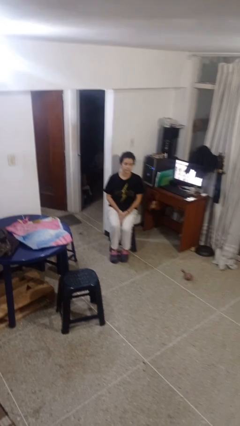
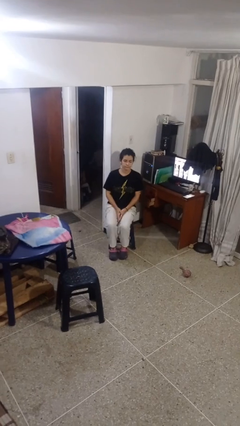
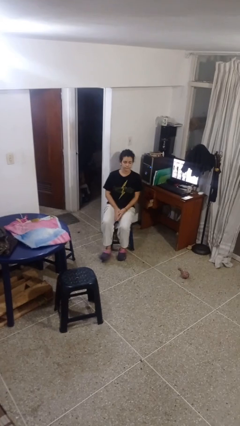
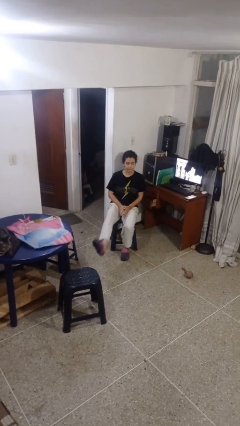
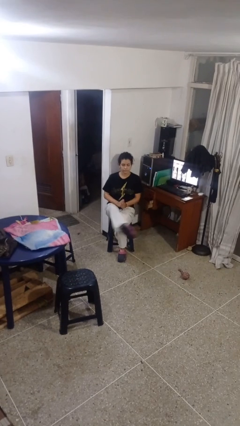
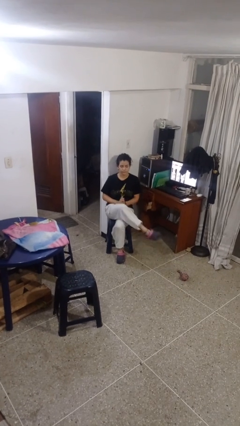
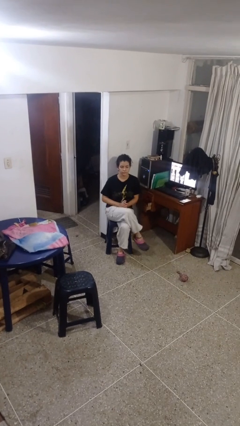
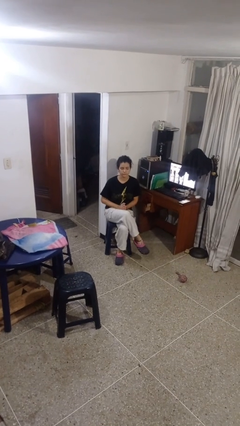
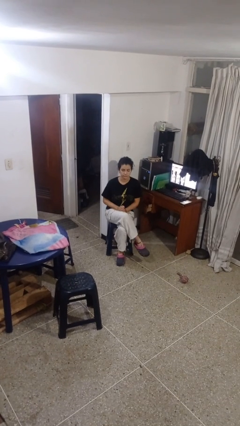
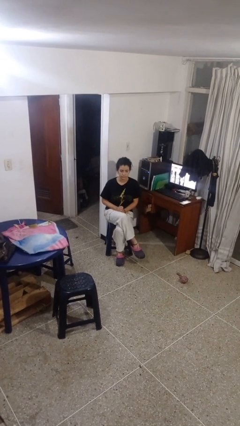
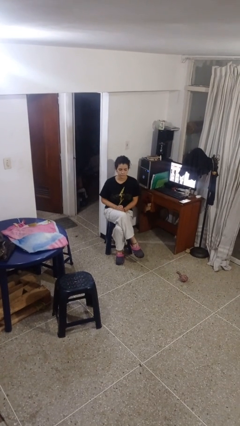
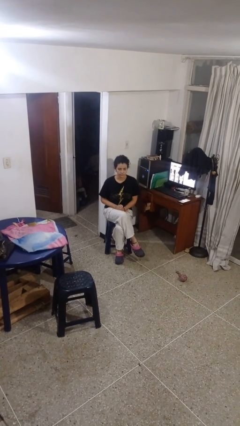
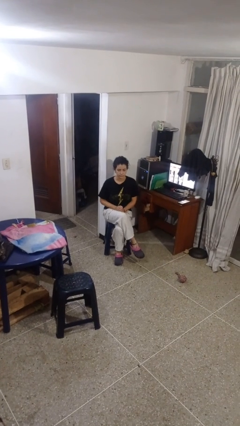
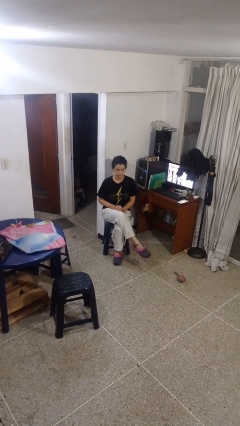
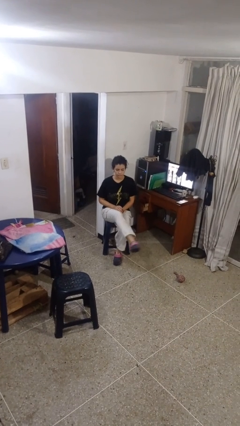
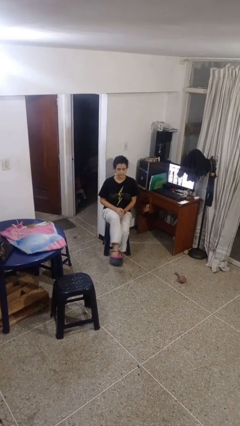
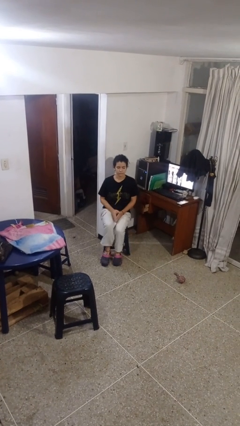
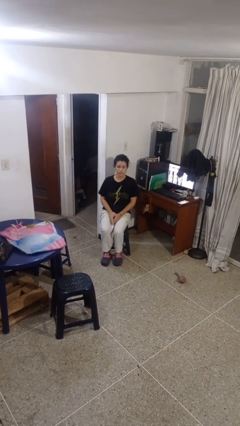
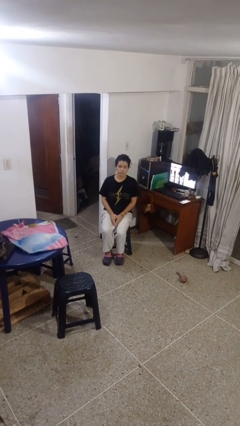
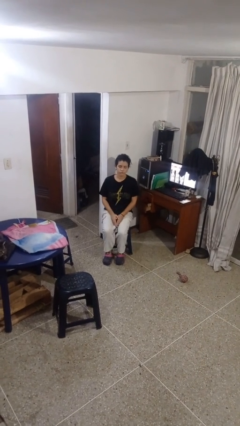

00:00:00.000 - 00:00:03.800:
person crosses legs

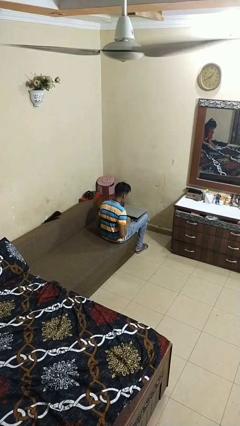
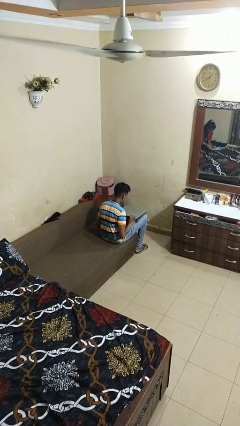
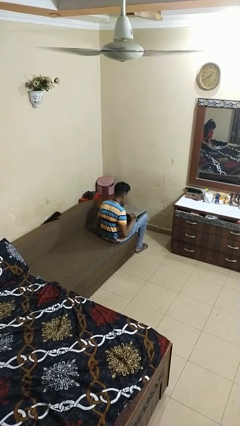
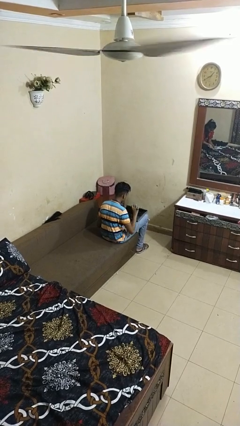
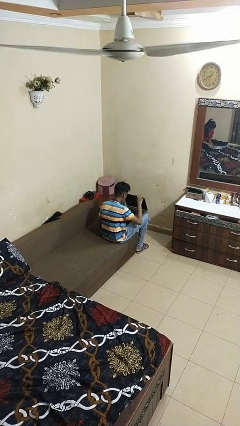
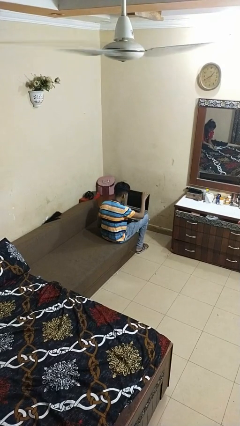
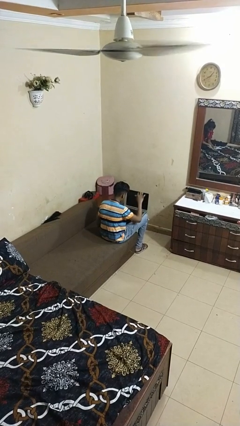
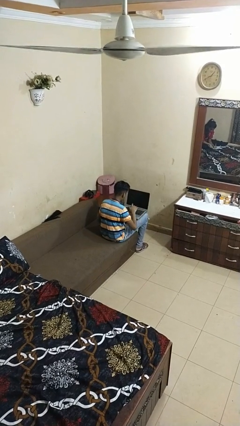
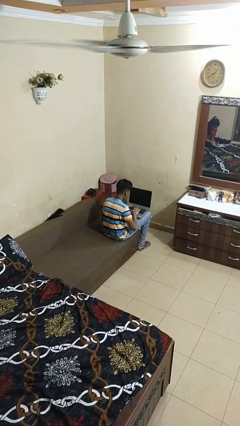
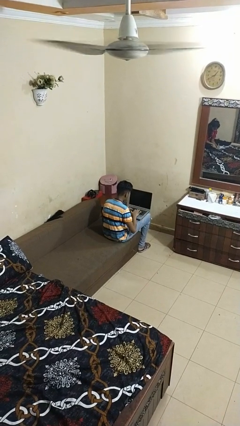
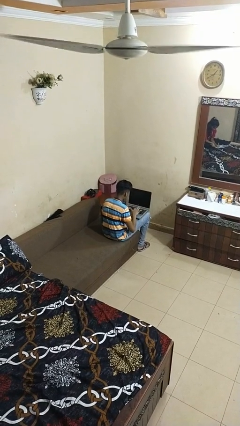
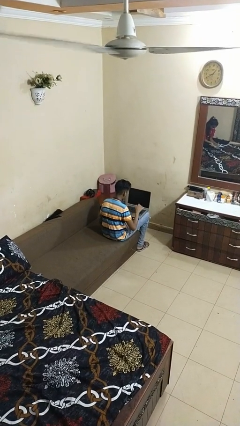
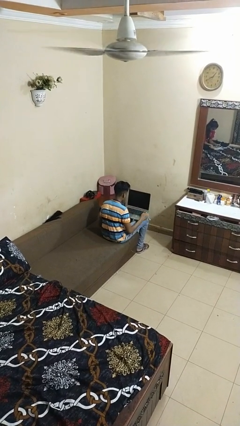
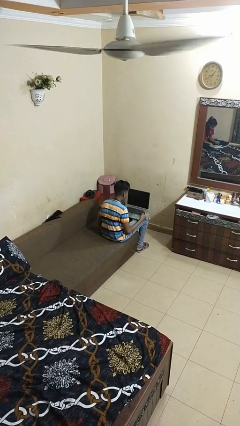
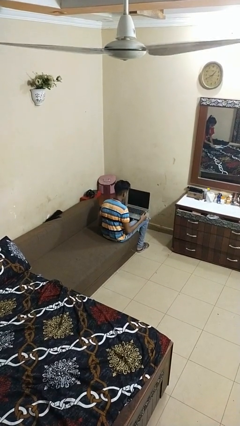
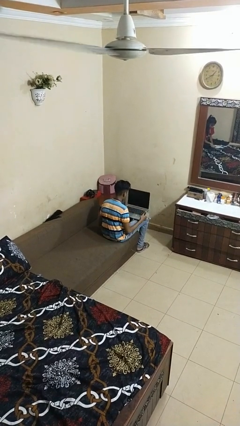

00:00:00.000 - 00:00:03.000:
person opens laptop

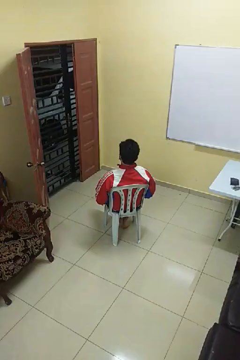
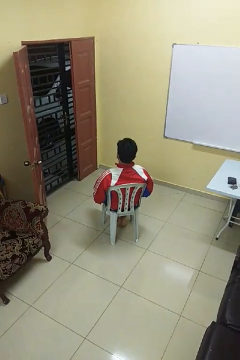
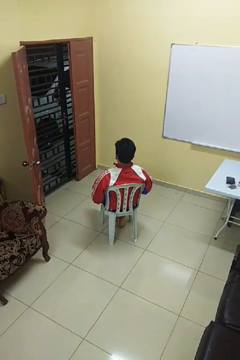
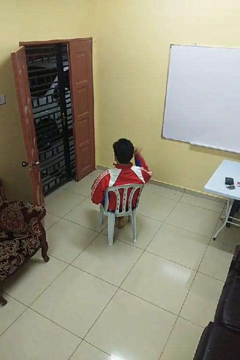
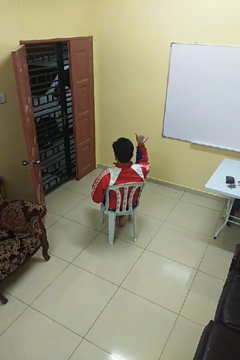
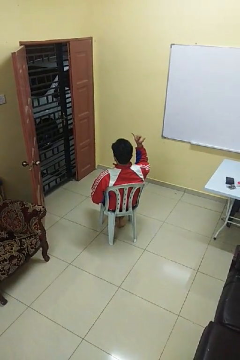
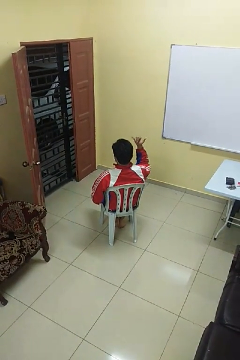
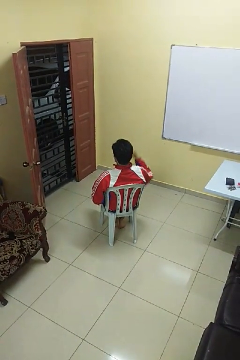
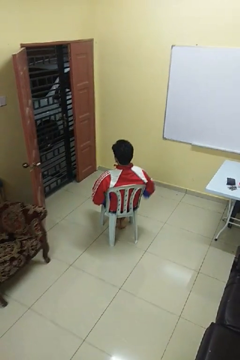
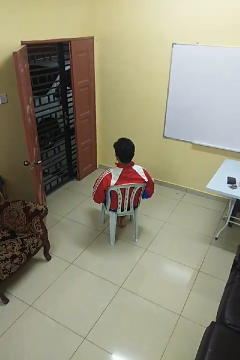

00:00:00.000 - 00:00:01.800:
person gestures hang loose

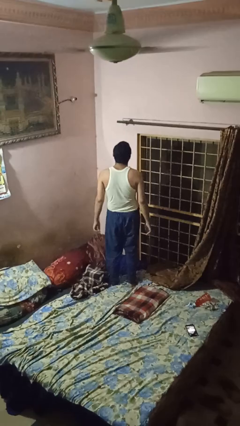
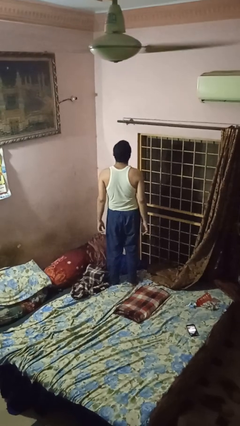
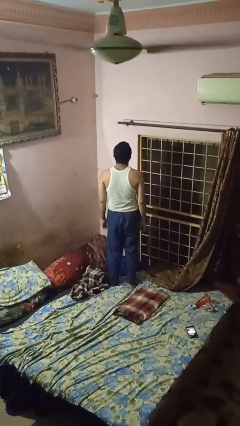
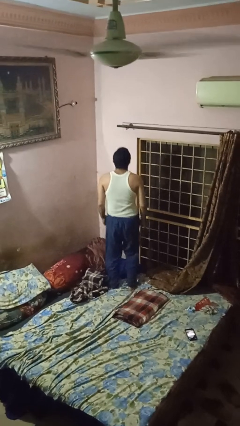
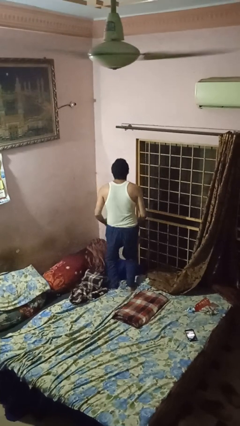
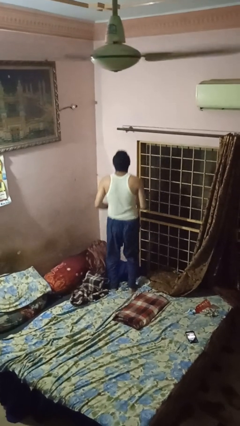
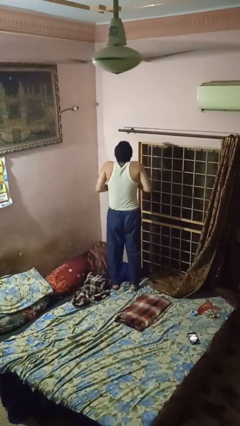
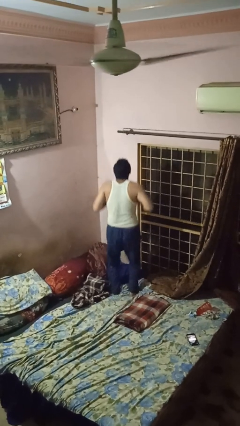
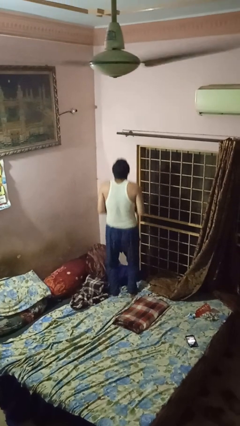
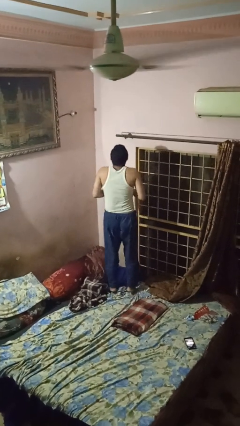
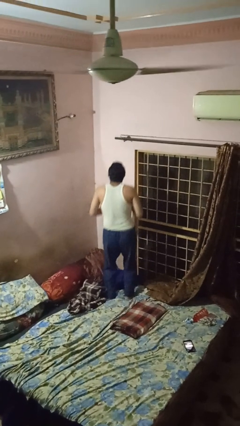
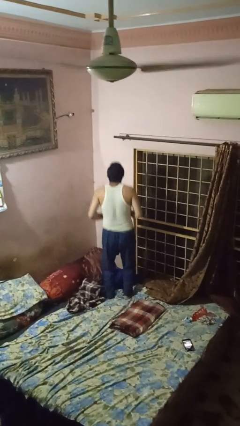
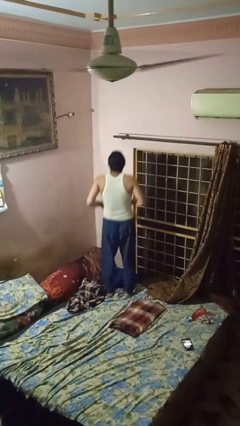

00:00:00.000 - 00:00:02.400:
person jumps on bed

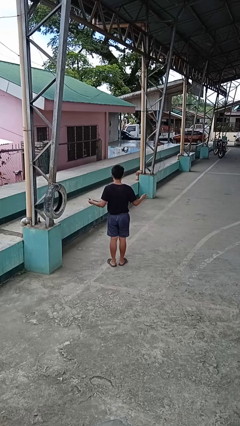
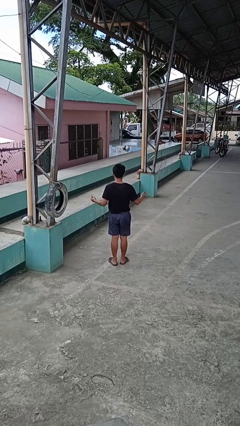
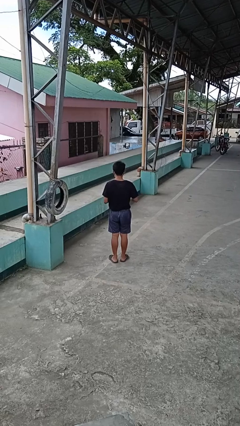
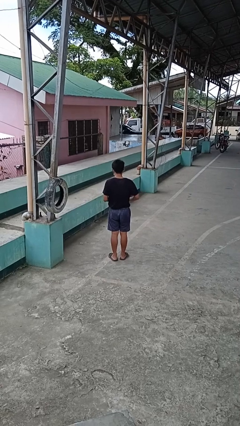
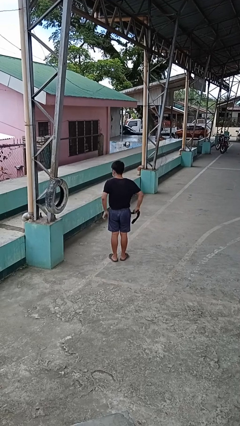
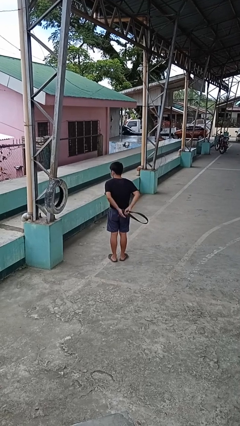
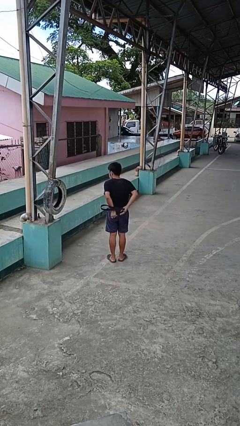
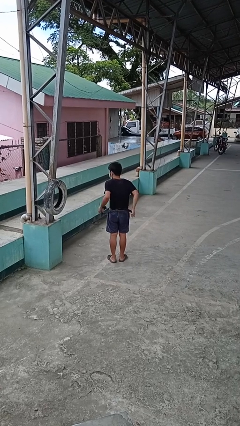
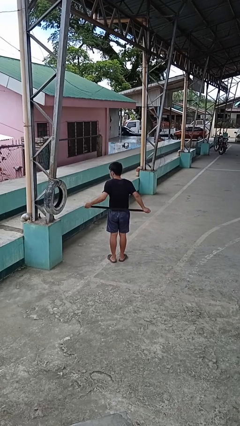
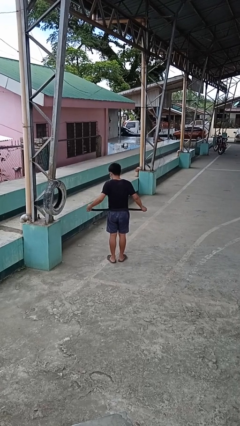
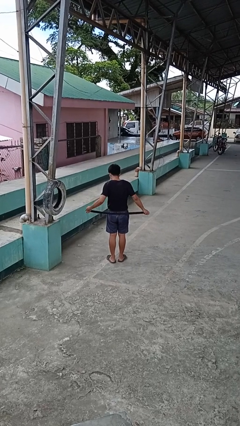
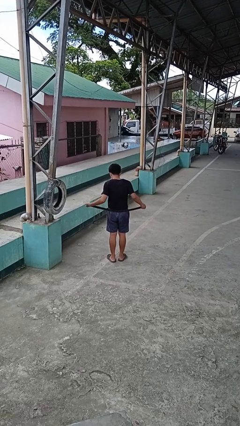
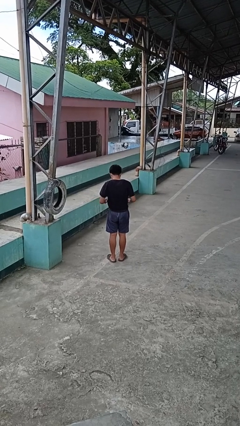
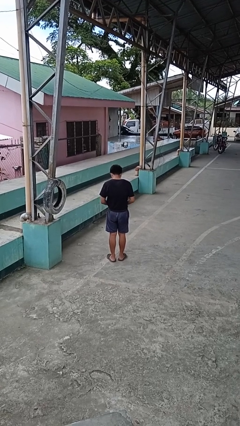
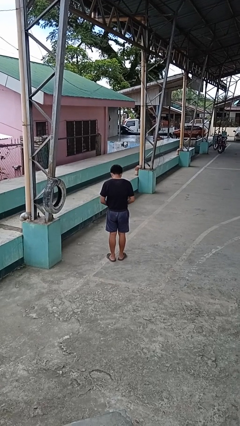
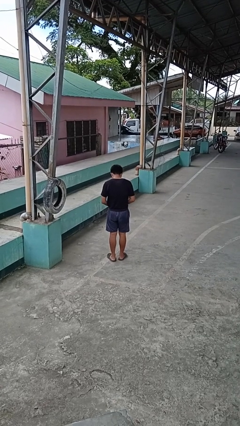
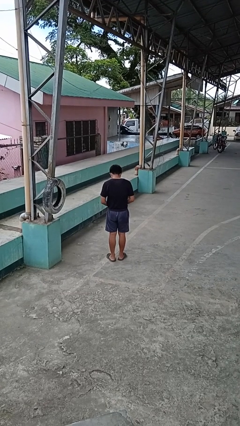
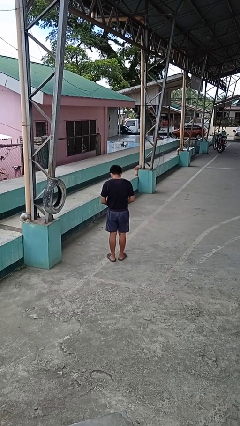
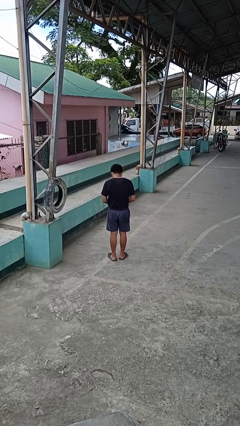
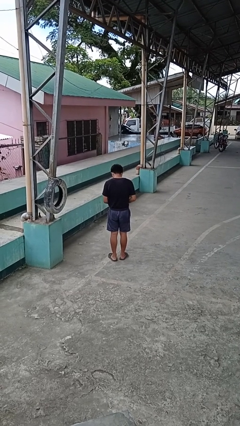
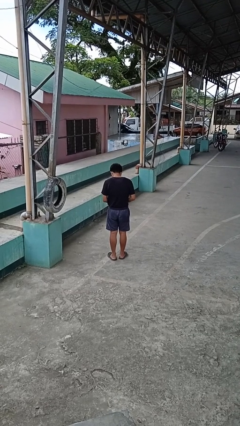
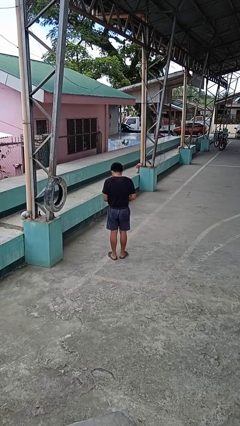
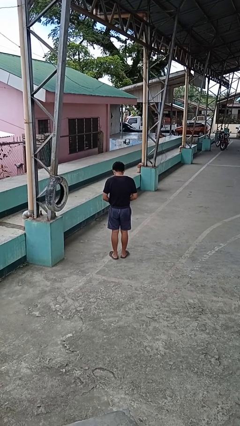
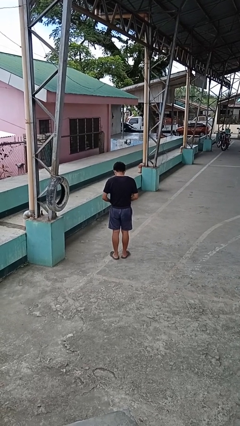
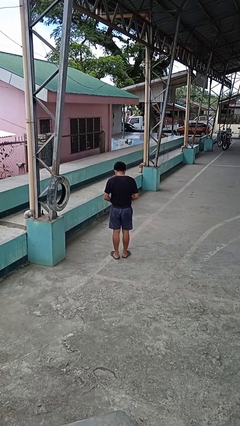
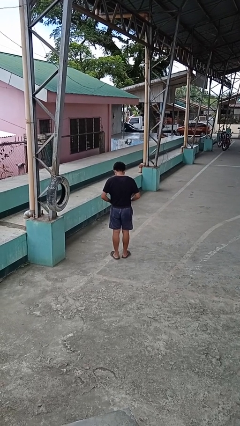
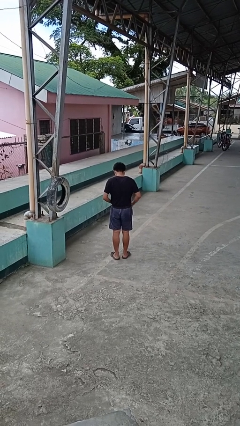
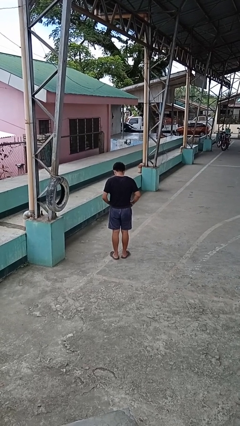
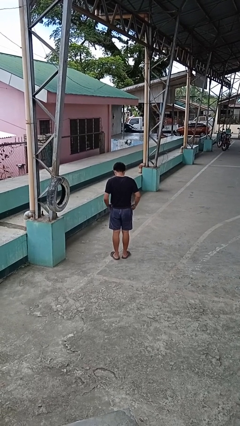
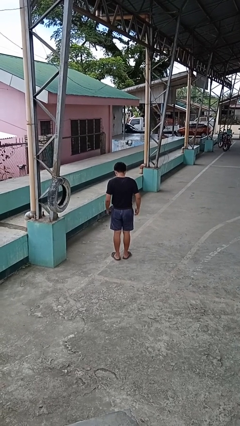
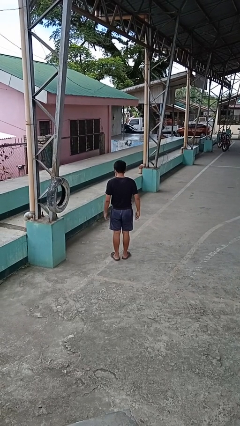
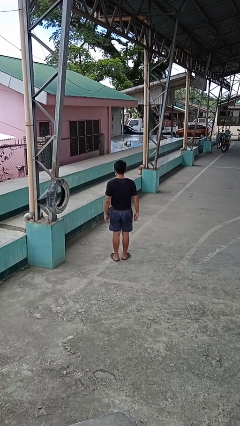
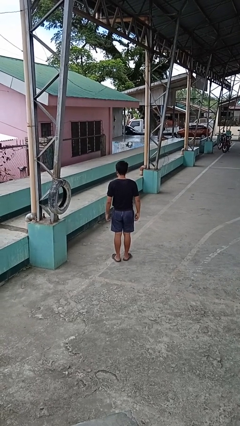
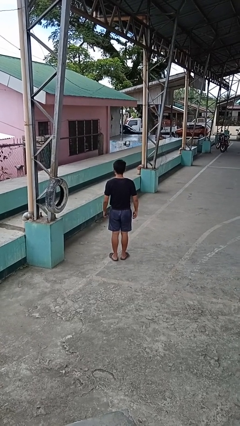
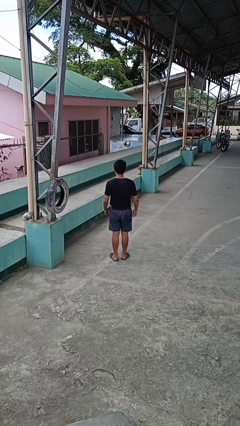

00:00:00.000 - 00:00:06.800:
person puts on belt

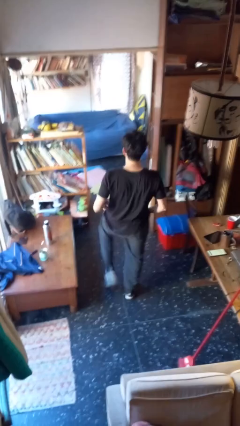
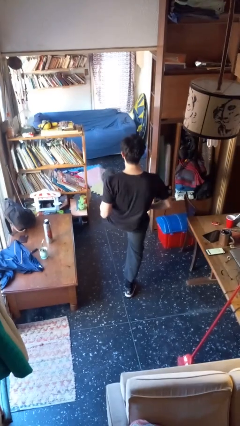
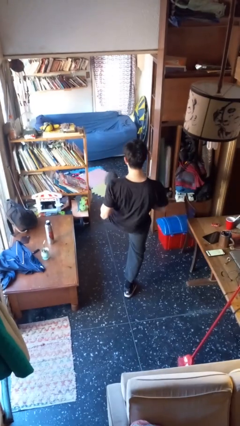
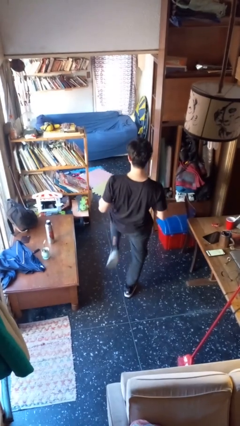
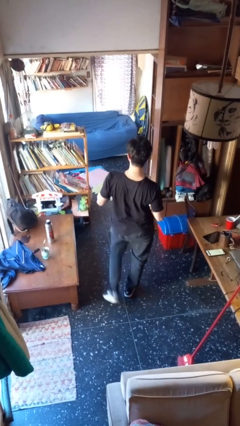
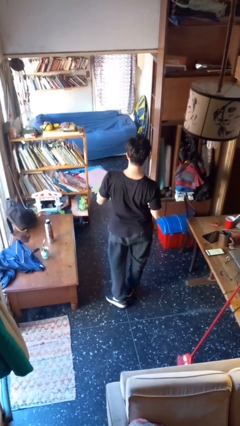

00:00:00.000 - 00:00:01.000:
person karate kicks
